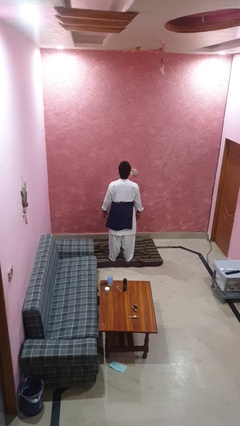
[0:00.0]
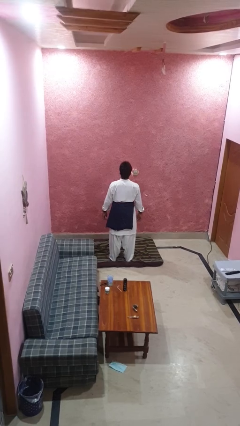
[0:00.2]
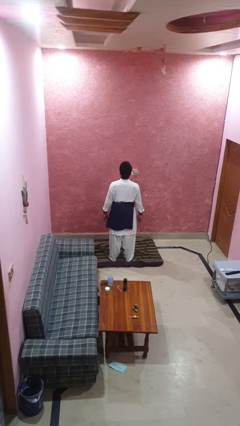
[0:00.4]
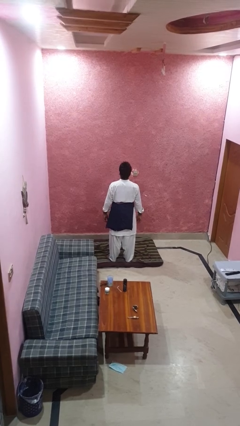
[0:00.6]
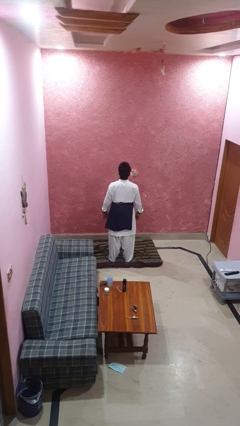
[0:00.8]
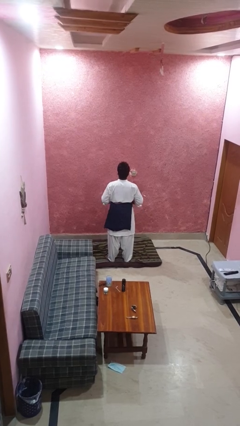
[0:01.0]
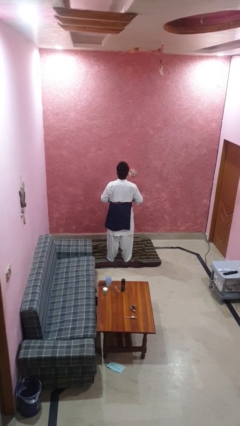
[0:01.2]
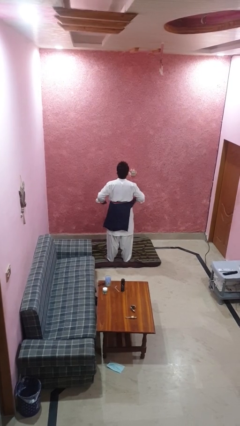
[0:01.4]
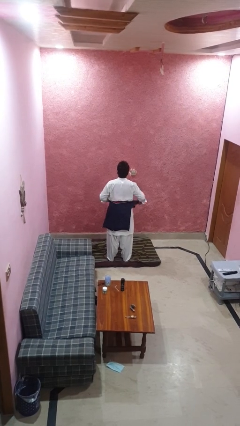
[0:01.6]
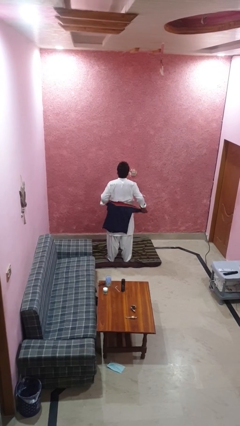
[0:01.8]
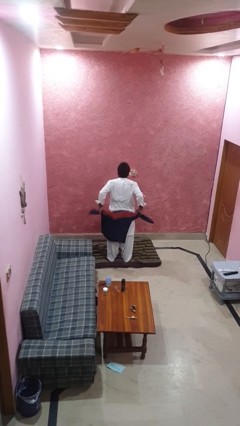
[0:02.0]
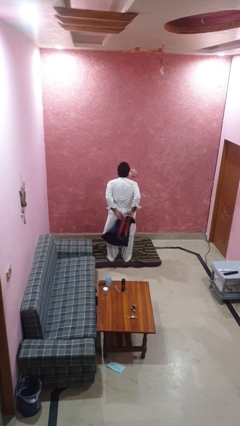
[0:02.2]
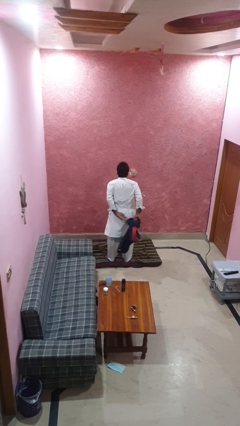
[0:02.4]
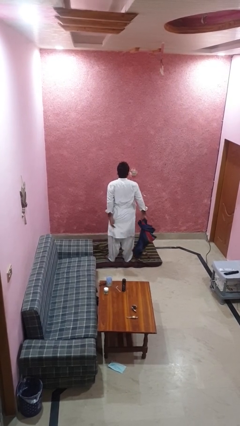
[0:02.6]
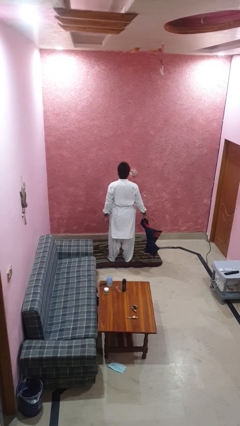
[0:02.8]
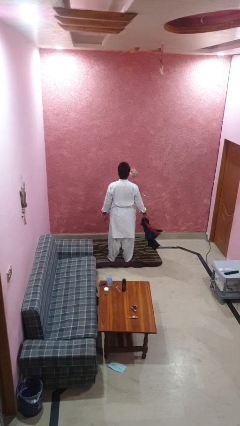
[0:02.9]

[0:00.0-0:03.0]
person unties jacket around waist

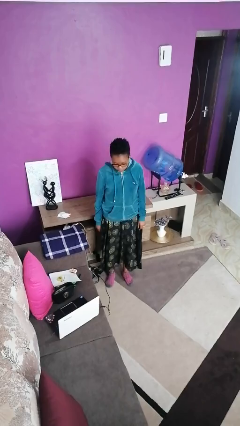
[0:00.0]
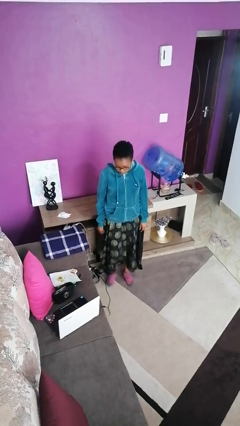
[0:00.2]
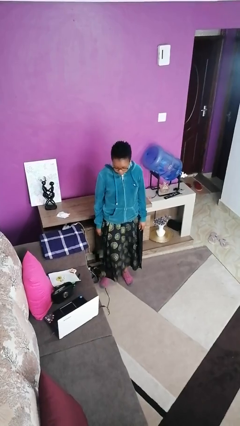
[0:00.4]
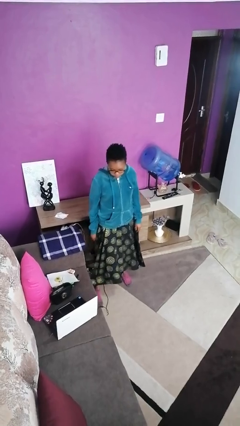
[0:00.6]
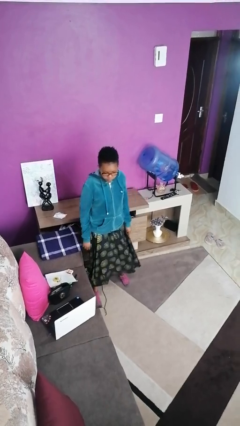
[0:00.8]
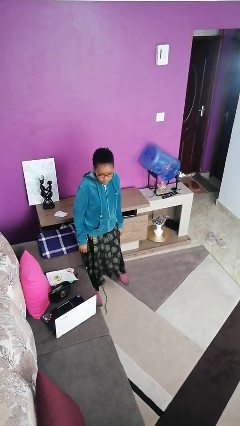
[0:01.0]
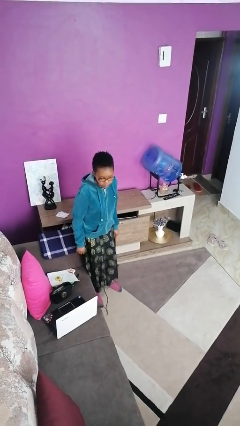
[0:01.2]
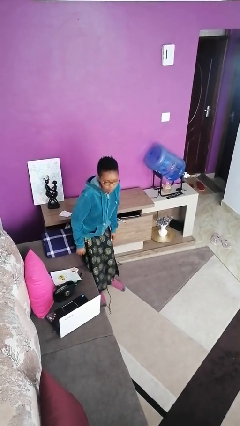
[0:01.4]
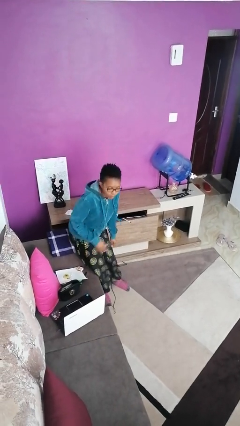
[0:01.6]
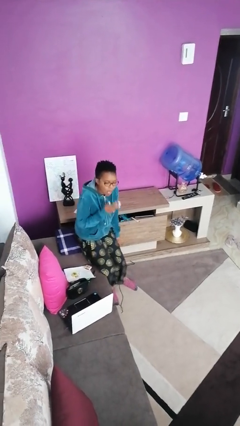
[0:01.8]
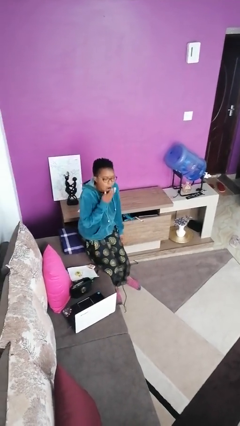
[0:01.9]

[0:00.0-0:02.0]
person opens cabinet

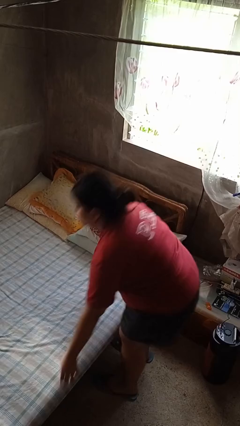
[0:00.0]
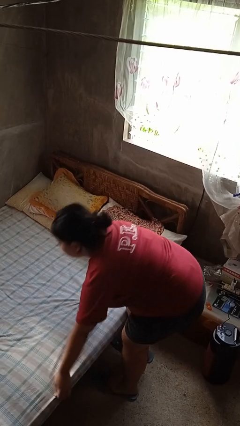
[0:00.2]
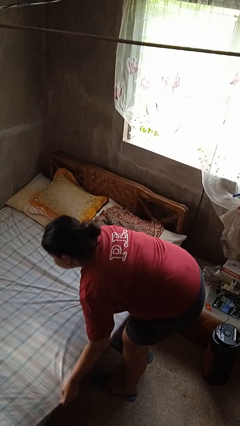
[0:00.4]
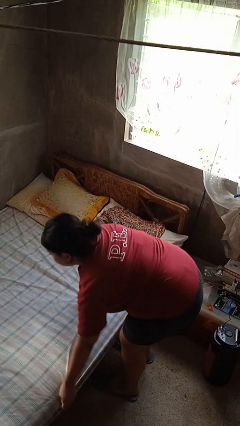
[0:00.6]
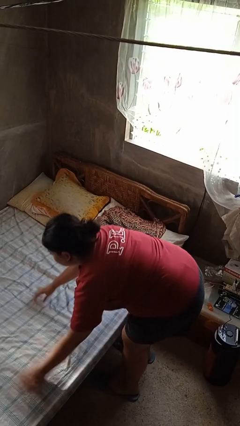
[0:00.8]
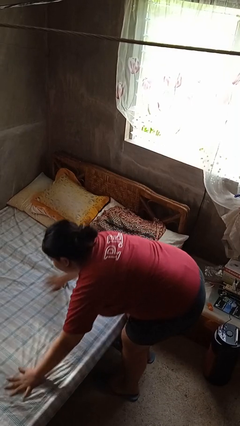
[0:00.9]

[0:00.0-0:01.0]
person makes bed

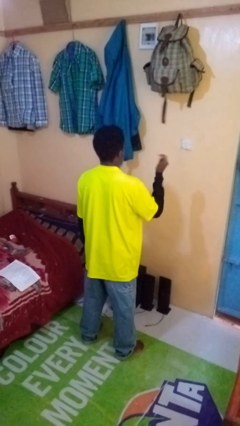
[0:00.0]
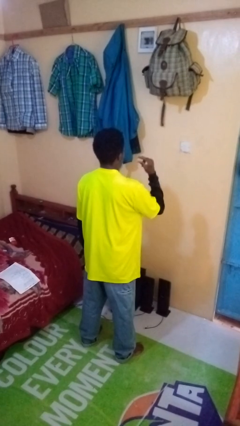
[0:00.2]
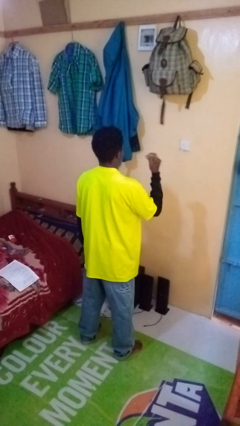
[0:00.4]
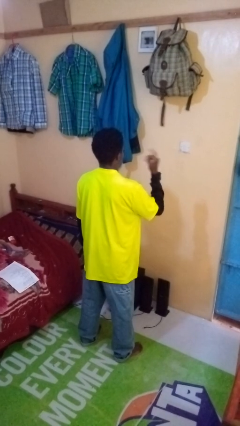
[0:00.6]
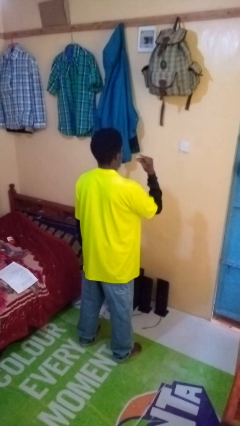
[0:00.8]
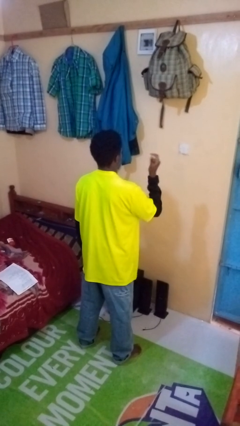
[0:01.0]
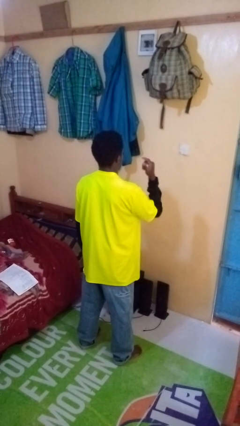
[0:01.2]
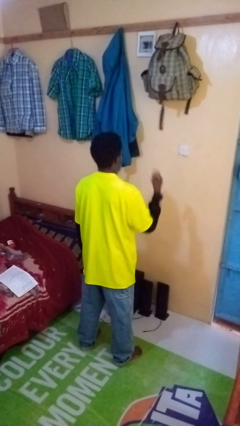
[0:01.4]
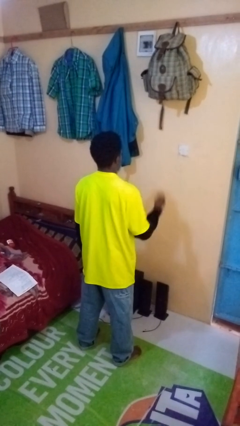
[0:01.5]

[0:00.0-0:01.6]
person snaps fingers

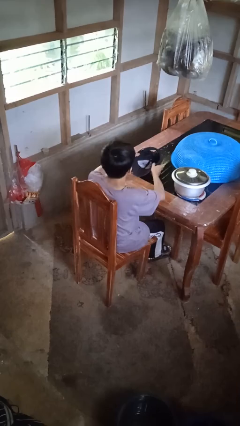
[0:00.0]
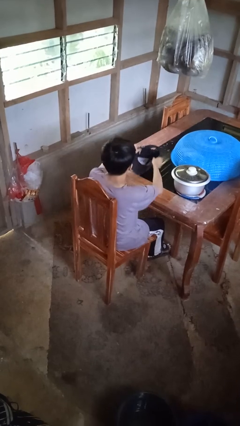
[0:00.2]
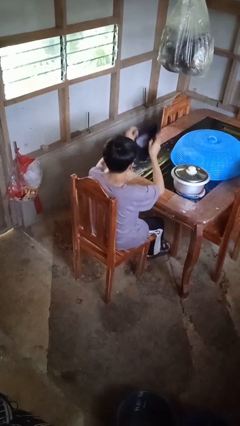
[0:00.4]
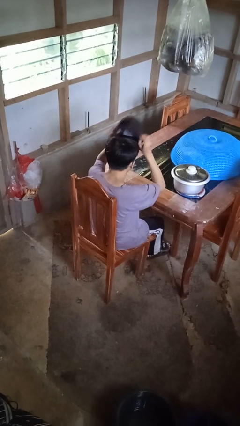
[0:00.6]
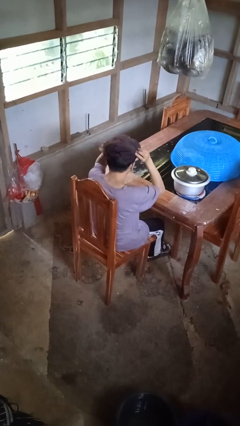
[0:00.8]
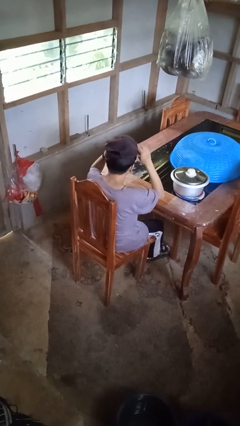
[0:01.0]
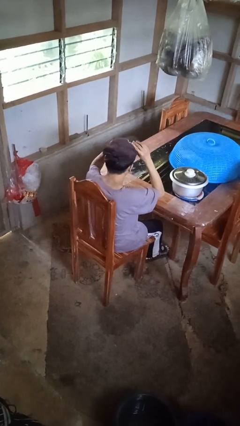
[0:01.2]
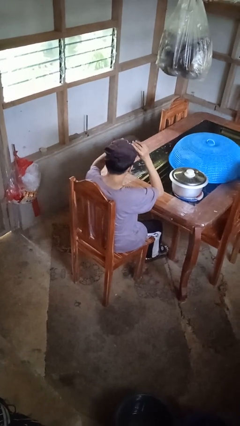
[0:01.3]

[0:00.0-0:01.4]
person puts on hat

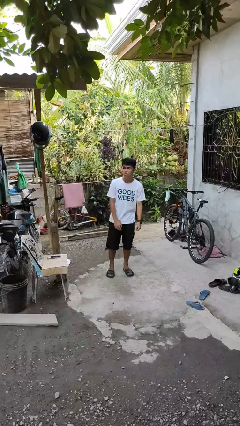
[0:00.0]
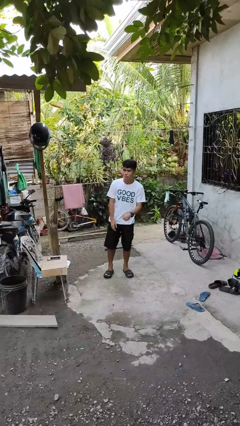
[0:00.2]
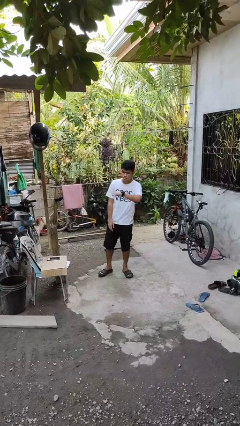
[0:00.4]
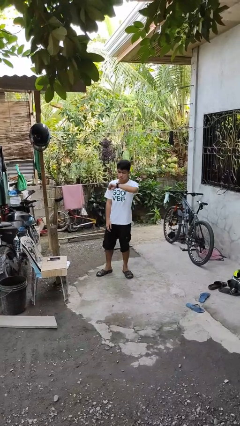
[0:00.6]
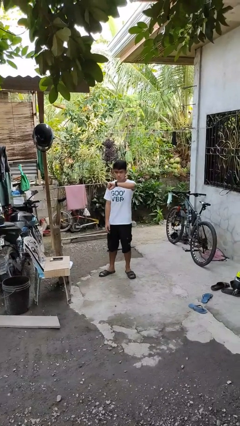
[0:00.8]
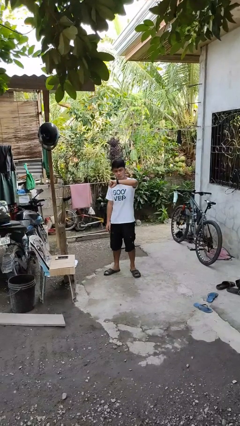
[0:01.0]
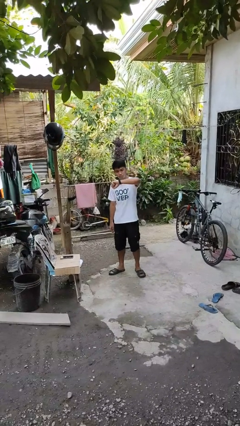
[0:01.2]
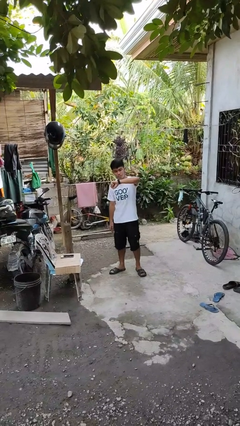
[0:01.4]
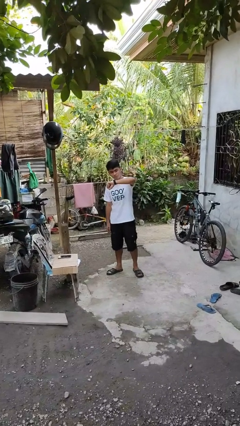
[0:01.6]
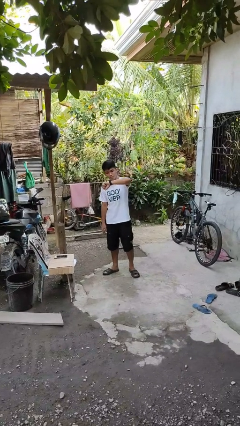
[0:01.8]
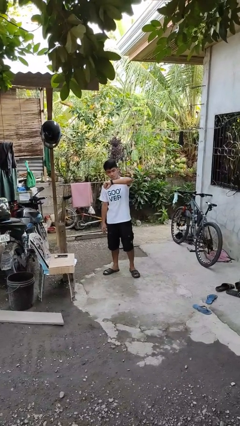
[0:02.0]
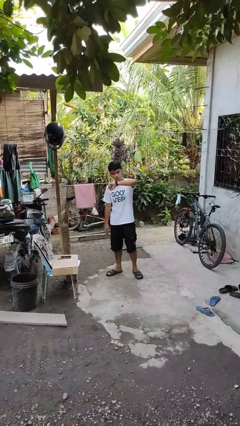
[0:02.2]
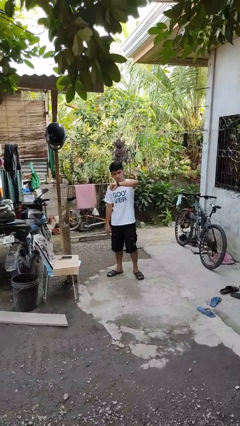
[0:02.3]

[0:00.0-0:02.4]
person looks at wristwatch

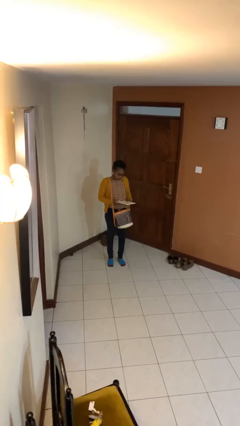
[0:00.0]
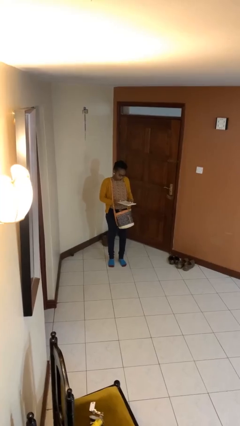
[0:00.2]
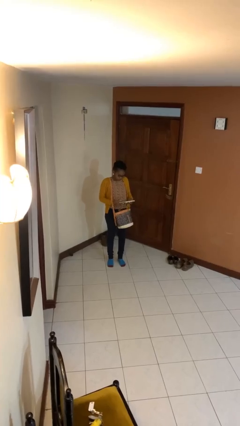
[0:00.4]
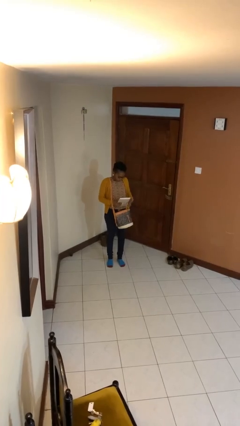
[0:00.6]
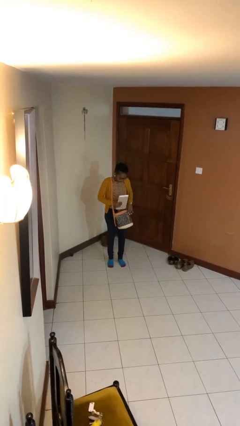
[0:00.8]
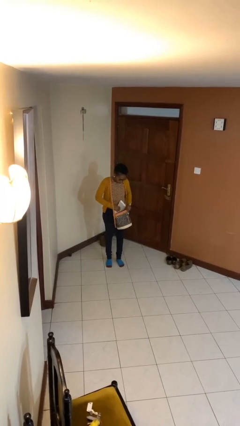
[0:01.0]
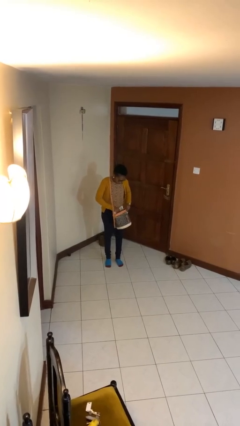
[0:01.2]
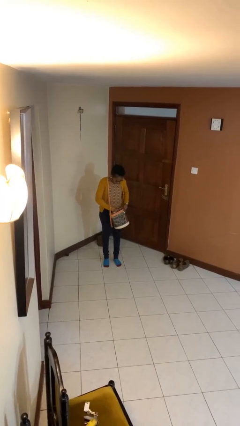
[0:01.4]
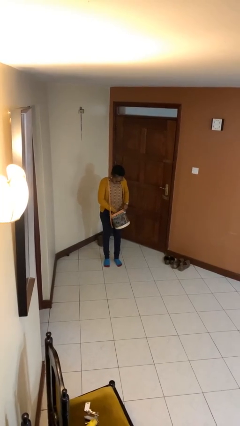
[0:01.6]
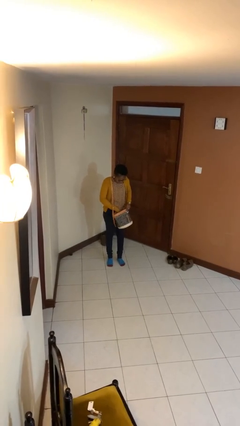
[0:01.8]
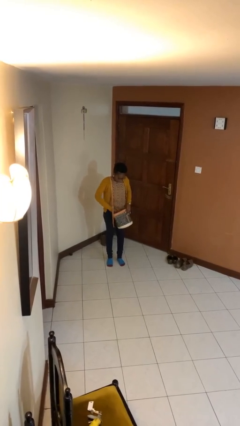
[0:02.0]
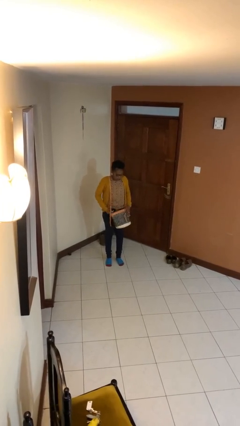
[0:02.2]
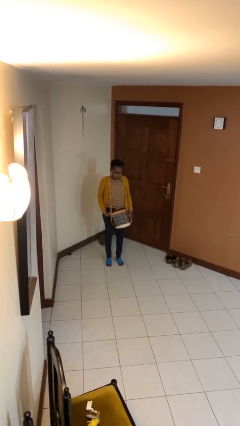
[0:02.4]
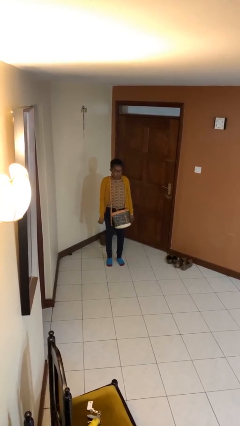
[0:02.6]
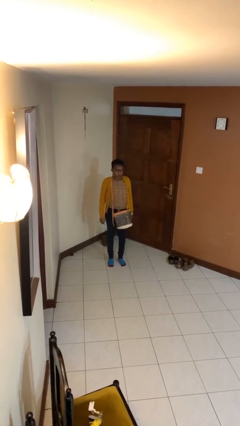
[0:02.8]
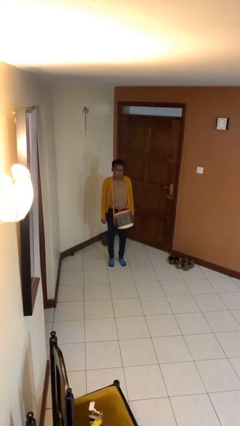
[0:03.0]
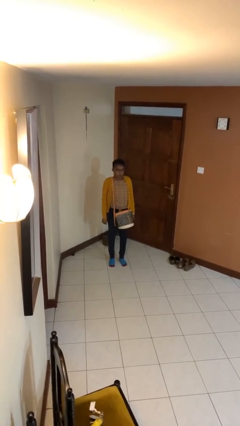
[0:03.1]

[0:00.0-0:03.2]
person puts object into purse

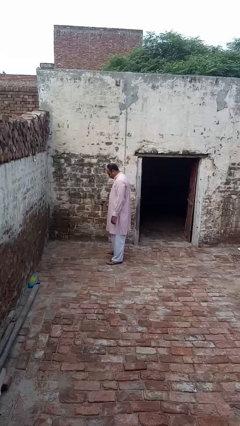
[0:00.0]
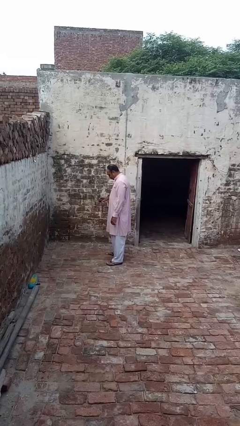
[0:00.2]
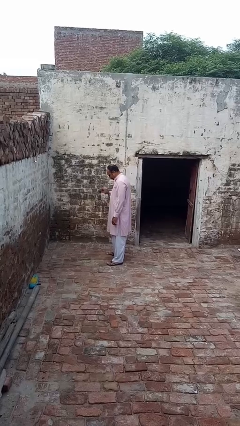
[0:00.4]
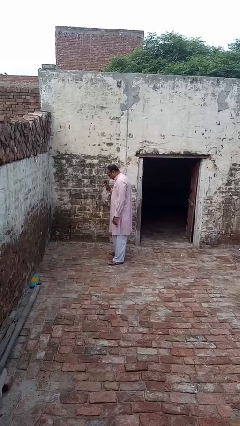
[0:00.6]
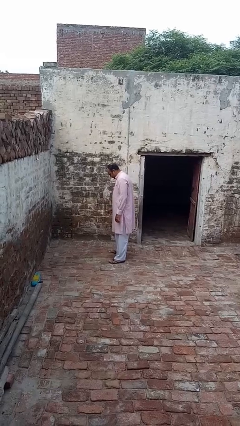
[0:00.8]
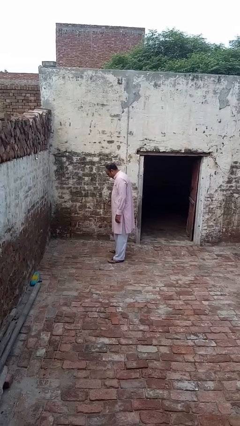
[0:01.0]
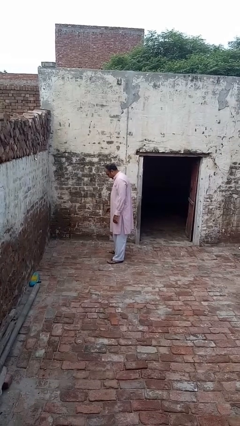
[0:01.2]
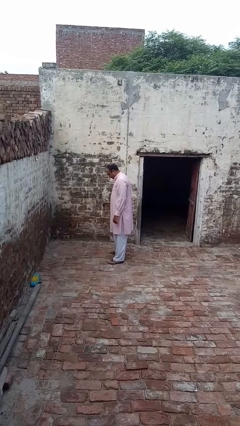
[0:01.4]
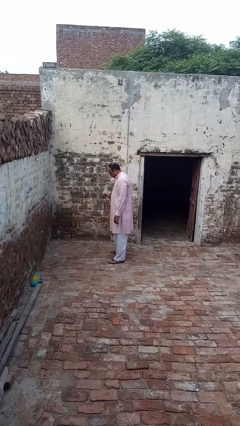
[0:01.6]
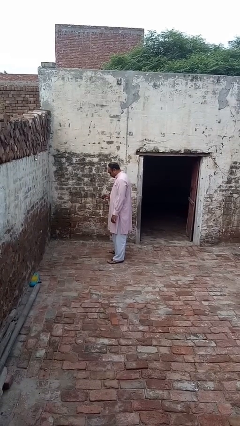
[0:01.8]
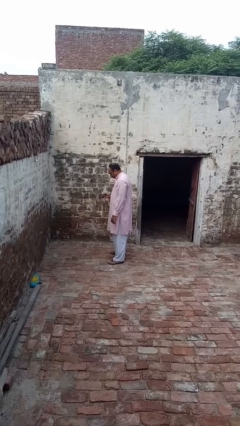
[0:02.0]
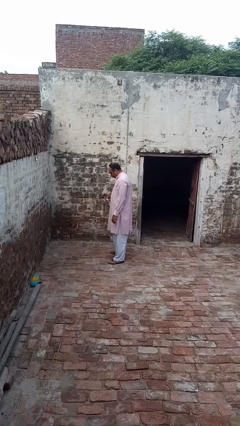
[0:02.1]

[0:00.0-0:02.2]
person bounces ball on floor
